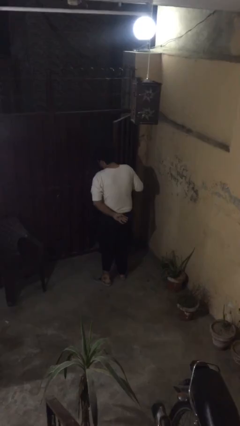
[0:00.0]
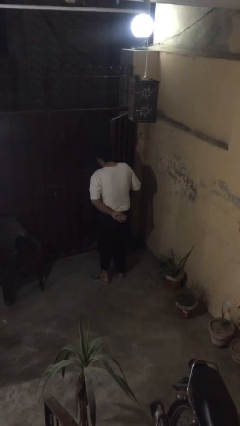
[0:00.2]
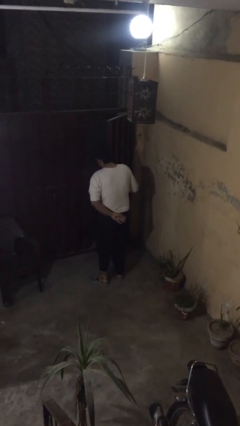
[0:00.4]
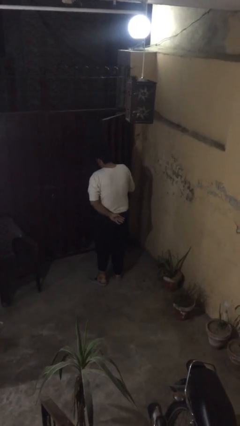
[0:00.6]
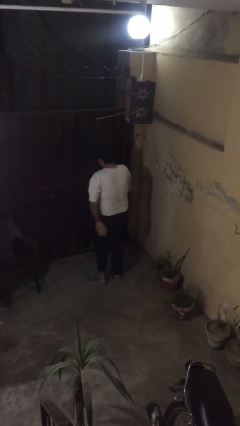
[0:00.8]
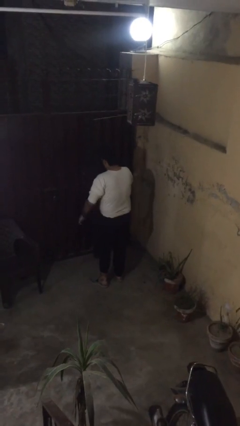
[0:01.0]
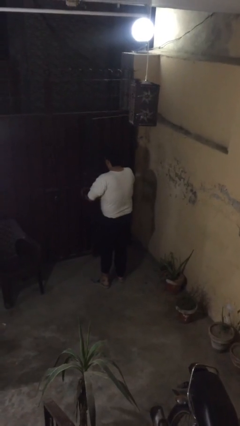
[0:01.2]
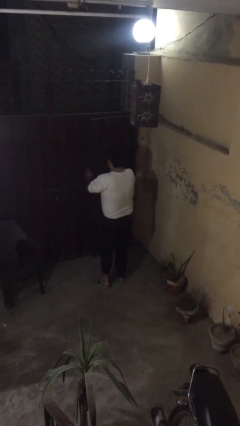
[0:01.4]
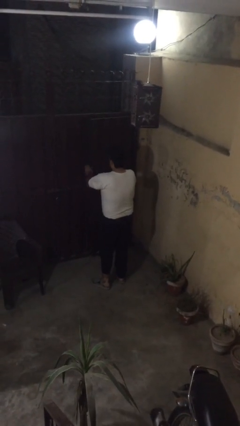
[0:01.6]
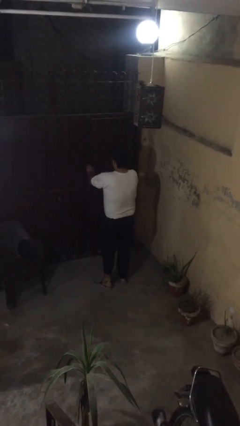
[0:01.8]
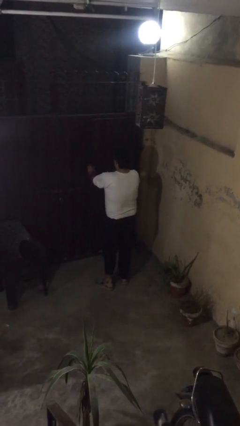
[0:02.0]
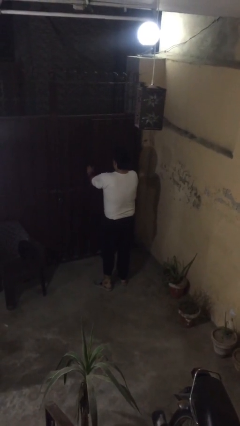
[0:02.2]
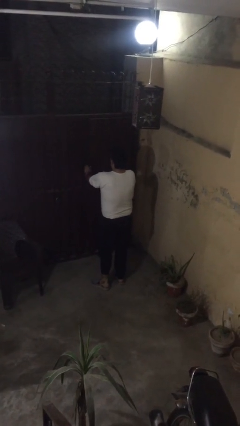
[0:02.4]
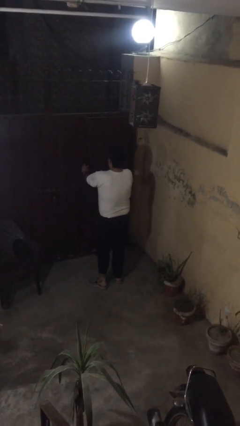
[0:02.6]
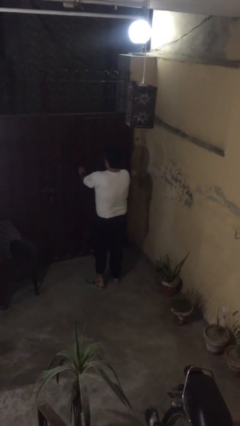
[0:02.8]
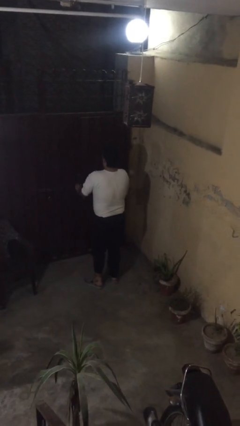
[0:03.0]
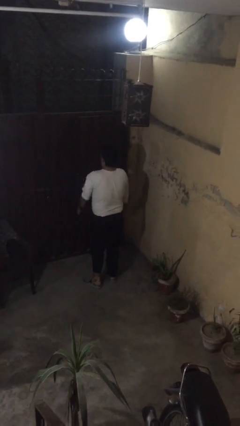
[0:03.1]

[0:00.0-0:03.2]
person closes facility door

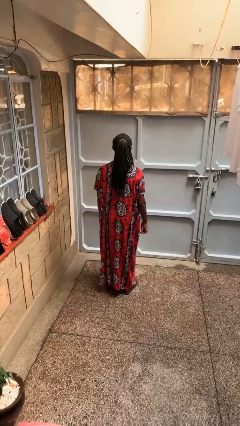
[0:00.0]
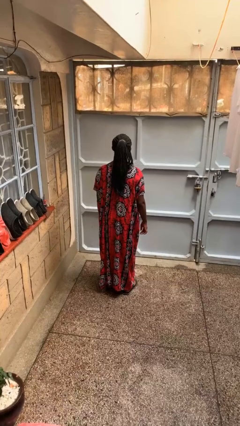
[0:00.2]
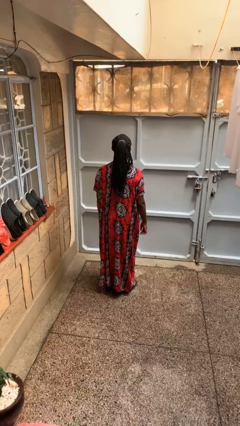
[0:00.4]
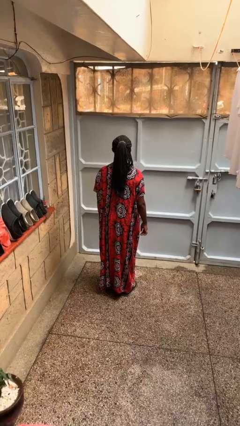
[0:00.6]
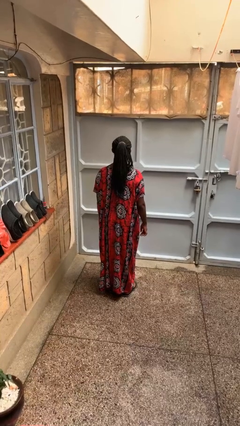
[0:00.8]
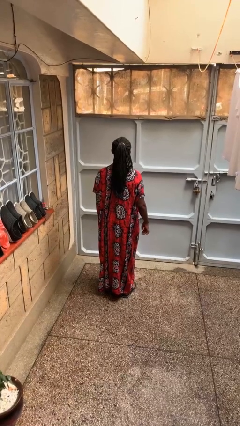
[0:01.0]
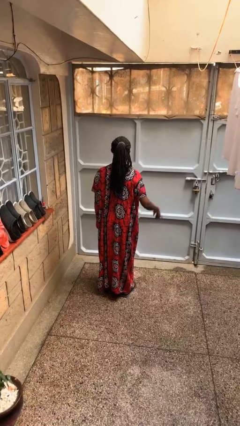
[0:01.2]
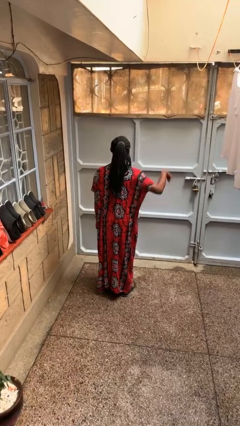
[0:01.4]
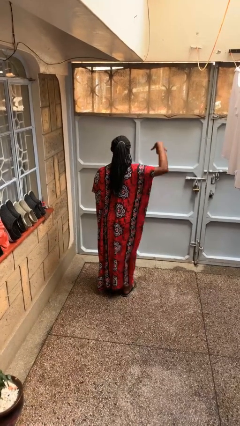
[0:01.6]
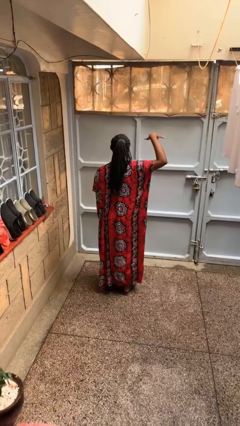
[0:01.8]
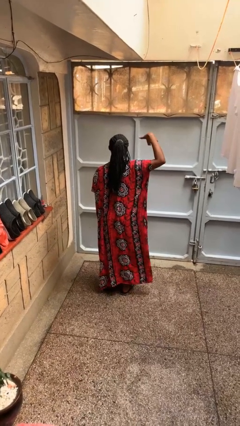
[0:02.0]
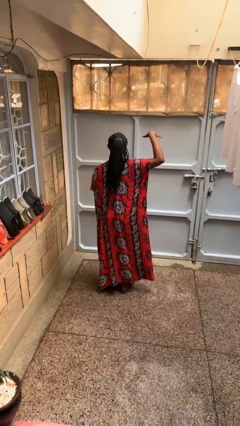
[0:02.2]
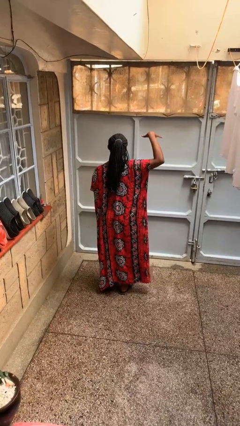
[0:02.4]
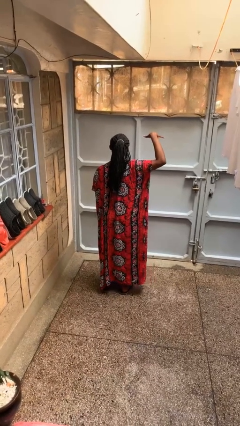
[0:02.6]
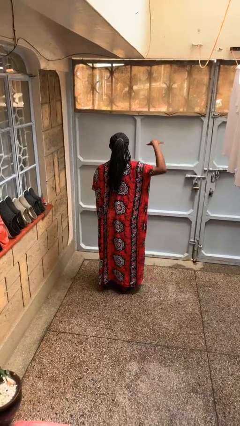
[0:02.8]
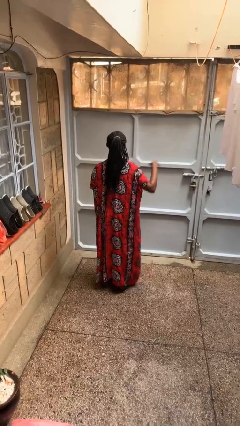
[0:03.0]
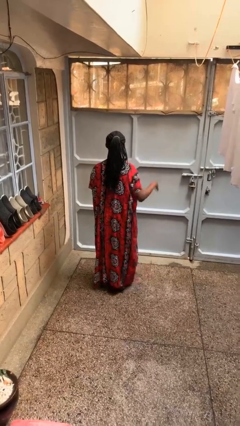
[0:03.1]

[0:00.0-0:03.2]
person gestures hang loose

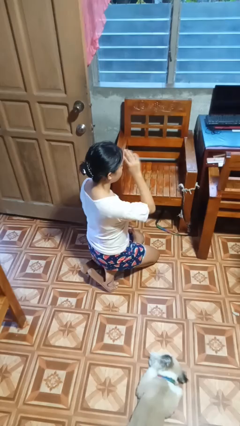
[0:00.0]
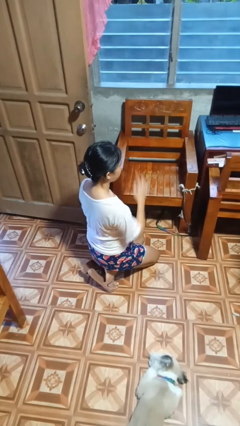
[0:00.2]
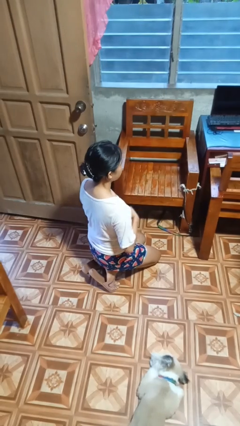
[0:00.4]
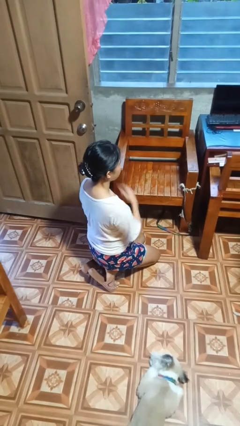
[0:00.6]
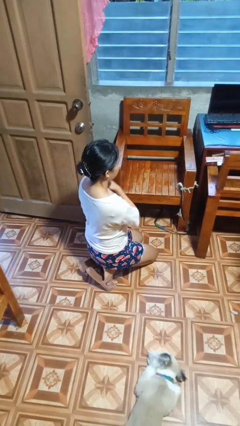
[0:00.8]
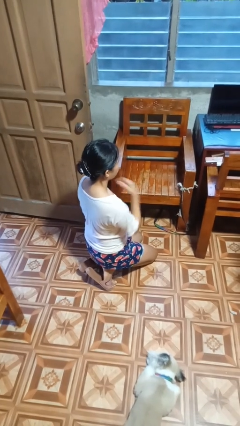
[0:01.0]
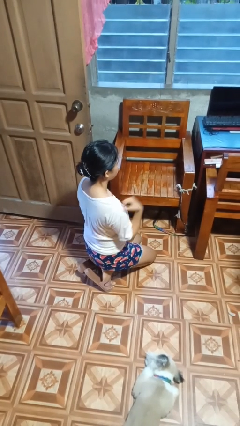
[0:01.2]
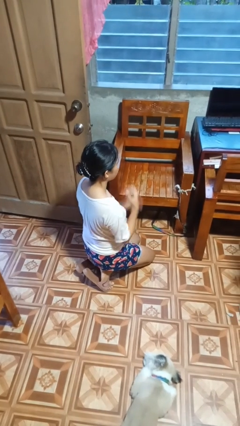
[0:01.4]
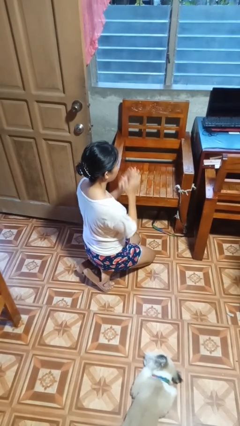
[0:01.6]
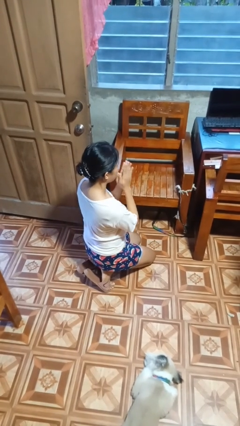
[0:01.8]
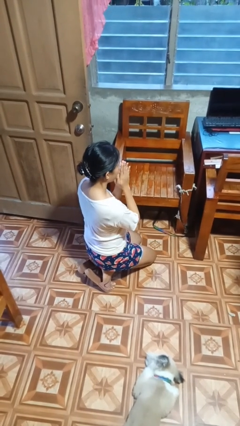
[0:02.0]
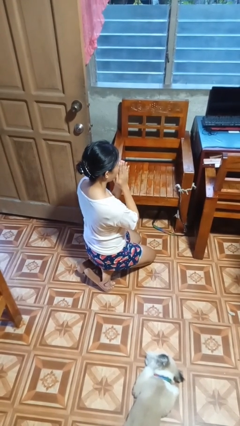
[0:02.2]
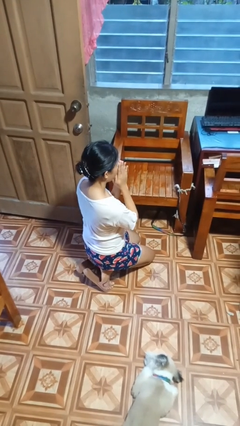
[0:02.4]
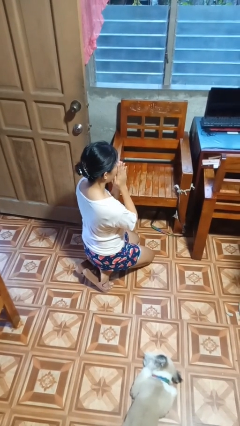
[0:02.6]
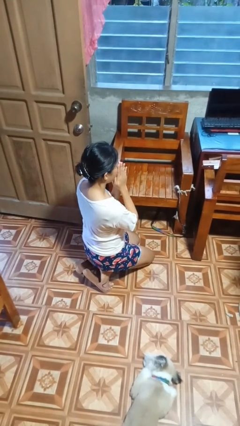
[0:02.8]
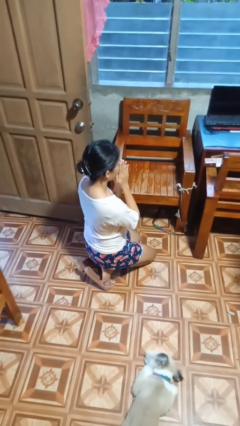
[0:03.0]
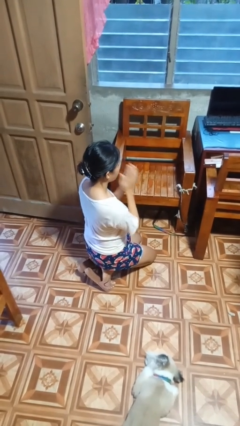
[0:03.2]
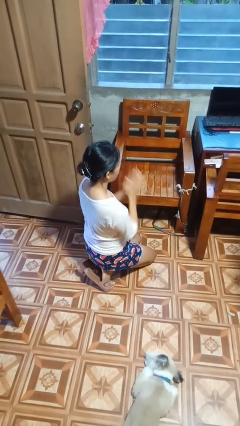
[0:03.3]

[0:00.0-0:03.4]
person prays

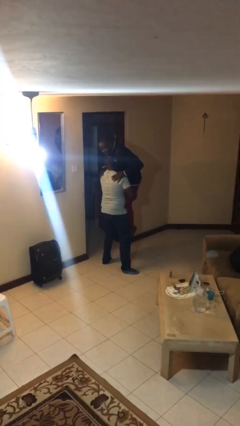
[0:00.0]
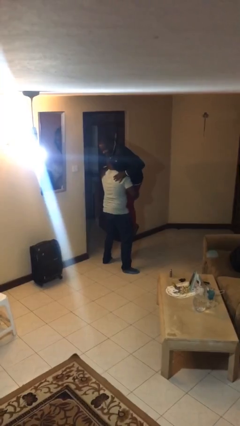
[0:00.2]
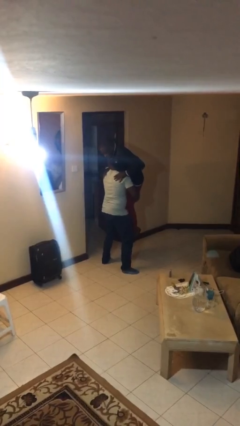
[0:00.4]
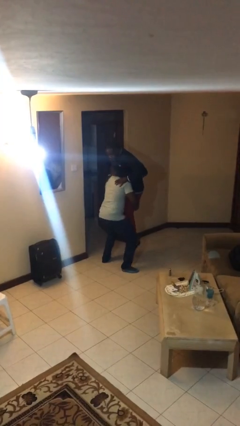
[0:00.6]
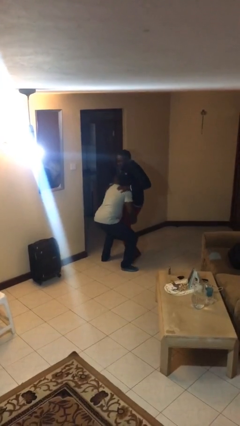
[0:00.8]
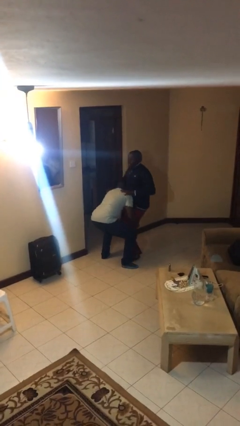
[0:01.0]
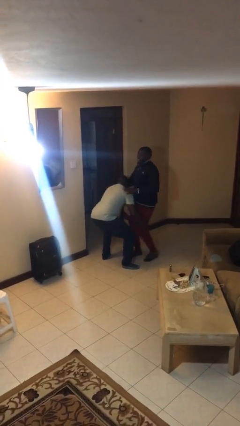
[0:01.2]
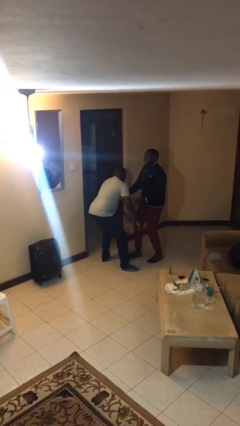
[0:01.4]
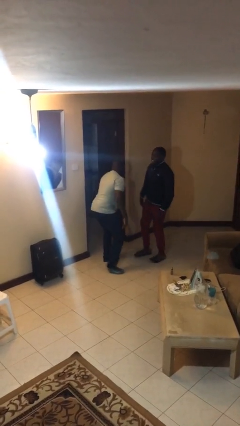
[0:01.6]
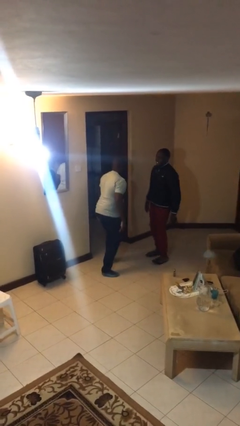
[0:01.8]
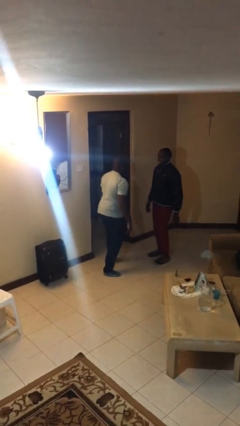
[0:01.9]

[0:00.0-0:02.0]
person puts down person

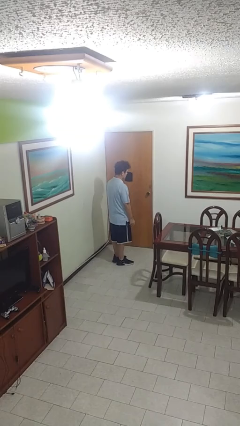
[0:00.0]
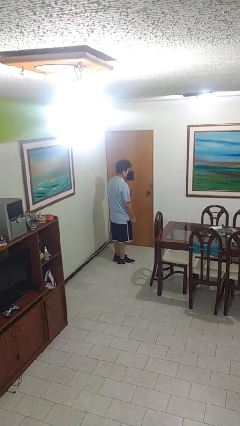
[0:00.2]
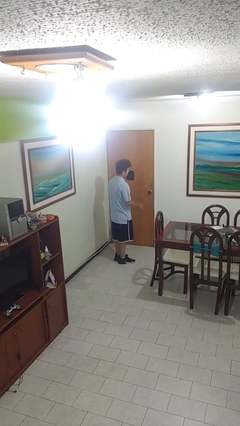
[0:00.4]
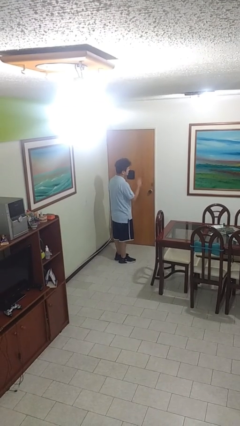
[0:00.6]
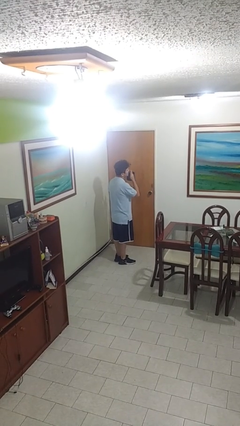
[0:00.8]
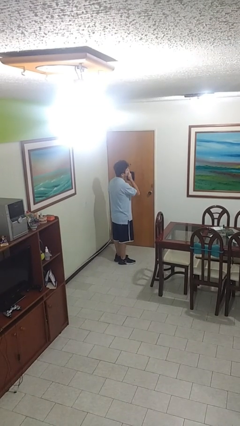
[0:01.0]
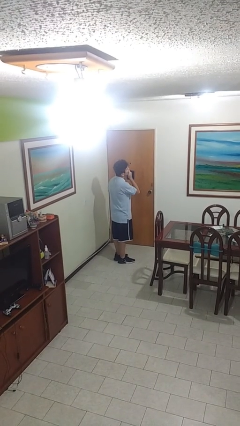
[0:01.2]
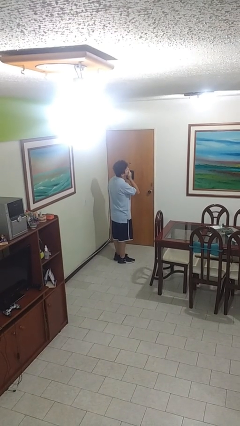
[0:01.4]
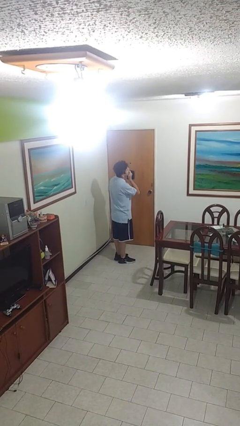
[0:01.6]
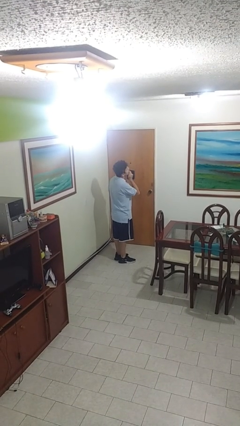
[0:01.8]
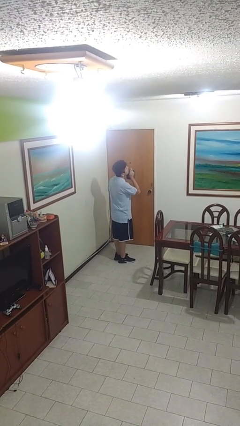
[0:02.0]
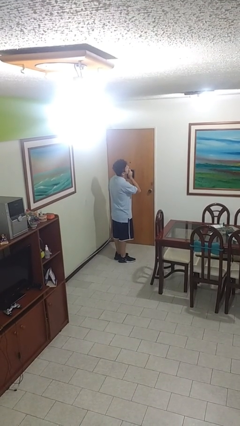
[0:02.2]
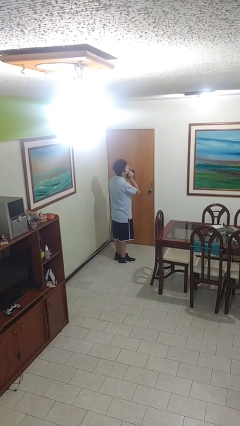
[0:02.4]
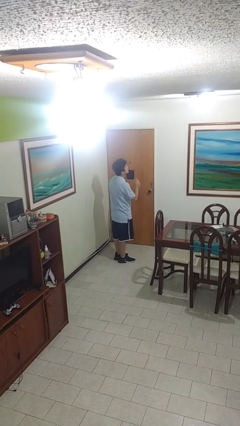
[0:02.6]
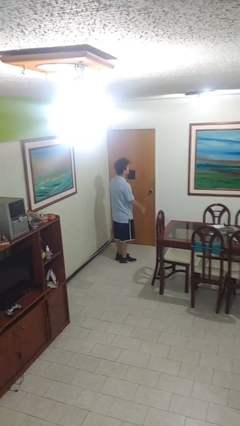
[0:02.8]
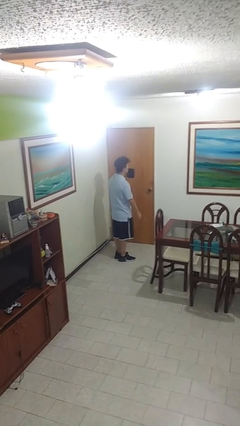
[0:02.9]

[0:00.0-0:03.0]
person strokes chin

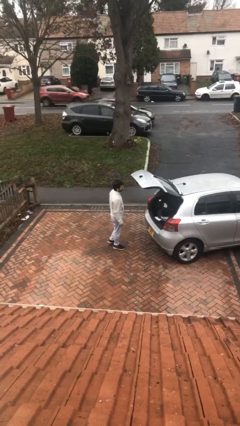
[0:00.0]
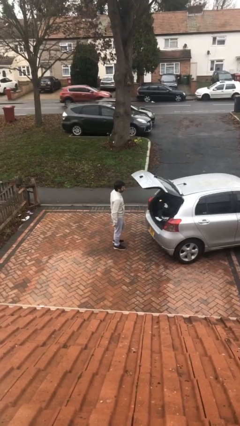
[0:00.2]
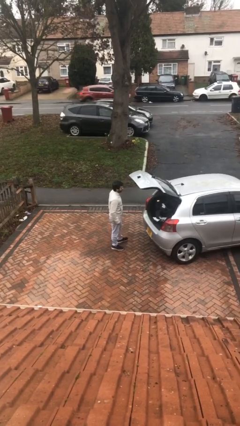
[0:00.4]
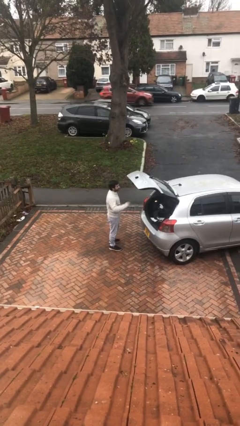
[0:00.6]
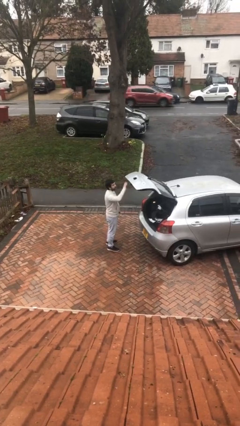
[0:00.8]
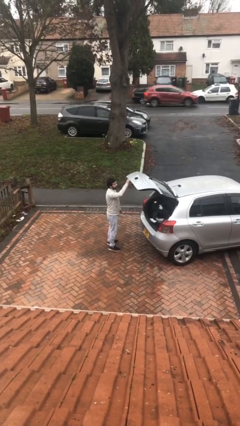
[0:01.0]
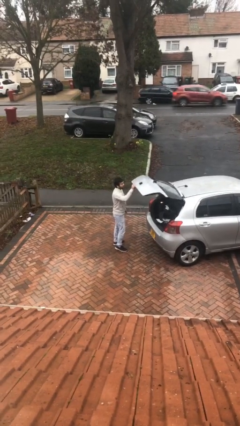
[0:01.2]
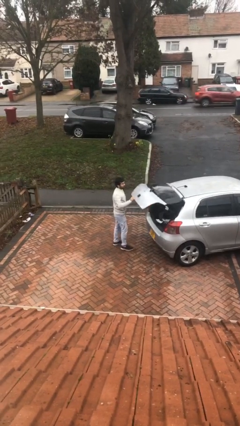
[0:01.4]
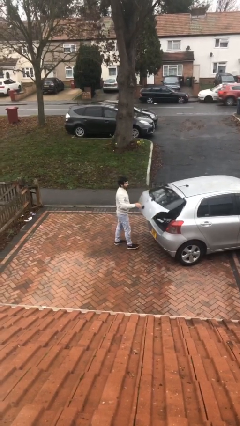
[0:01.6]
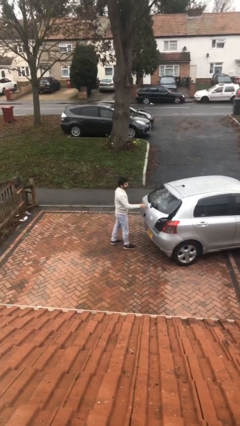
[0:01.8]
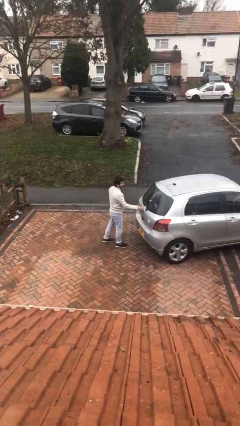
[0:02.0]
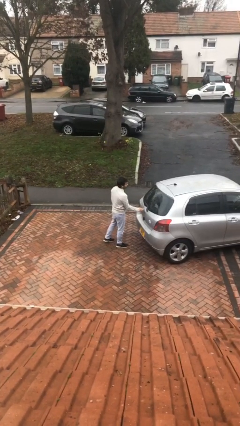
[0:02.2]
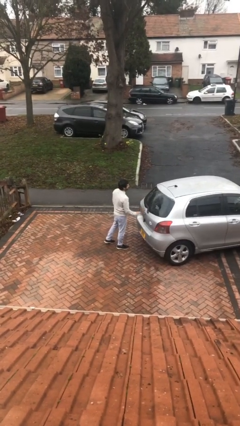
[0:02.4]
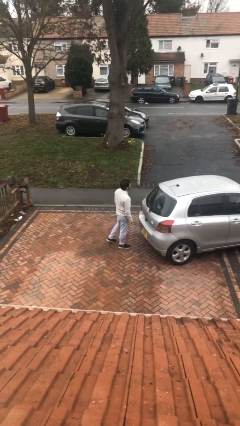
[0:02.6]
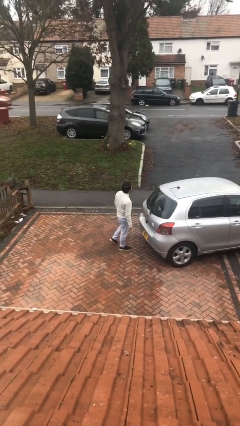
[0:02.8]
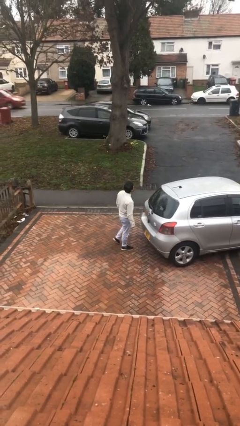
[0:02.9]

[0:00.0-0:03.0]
person closes car trunk
